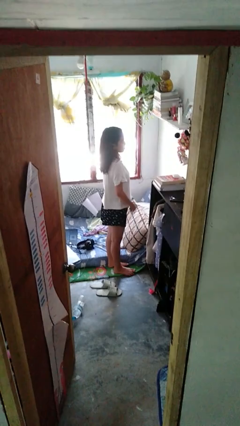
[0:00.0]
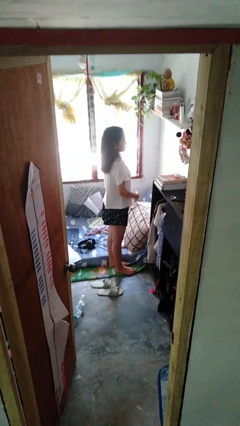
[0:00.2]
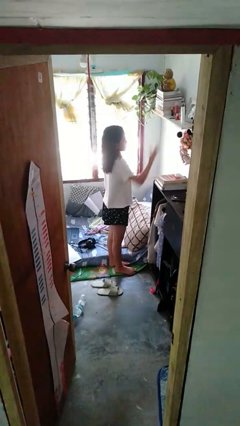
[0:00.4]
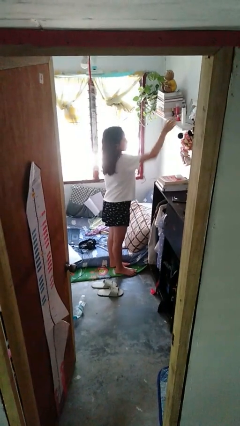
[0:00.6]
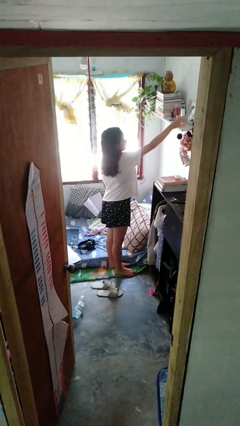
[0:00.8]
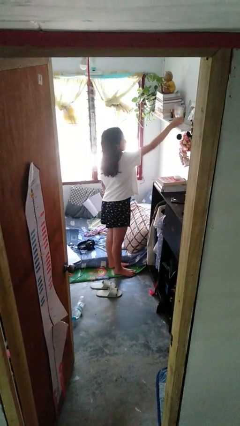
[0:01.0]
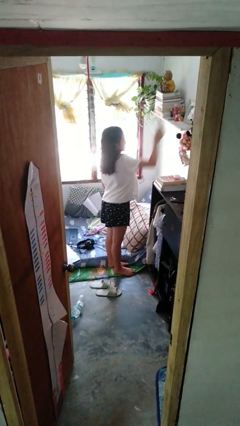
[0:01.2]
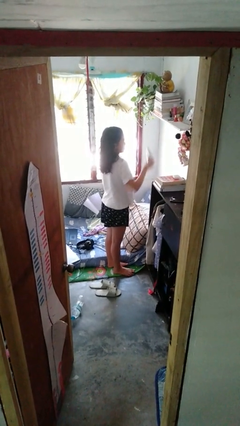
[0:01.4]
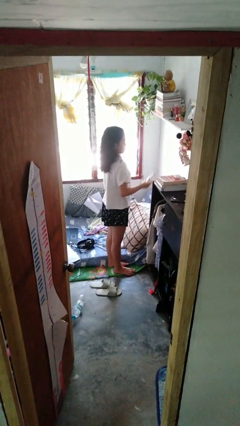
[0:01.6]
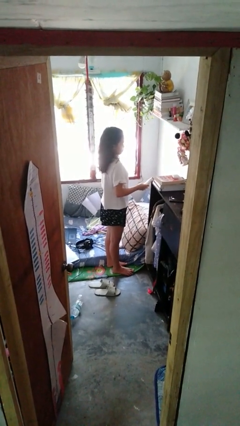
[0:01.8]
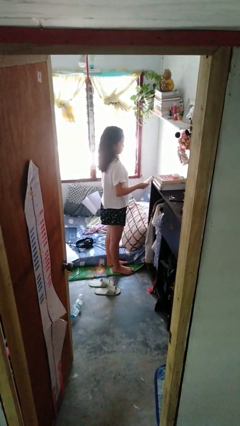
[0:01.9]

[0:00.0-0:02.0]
person picks up object from shelf

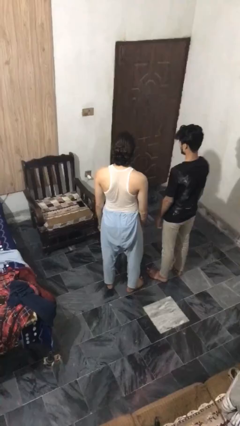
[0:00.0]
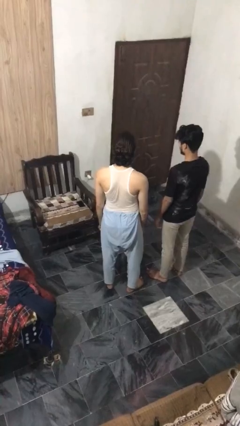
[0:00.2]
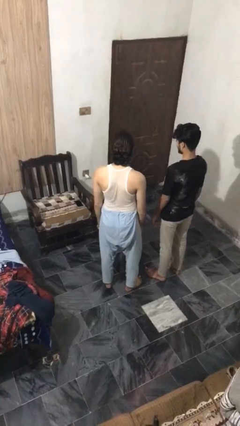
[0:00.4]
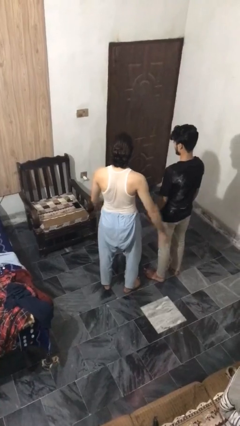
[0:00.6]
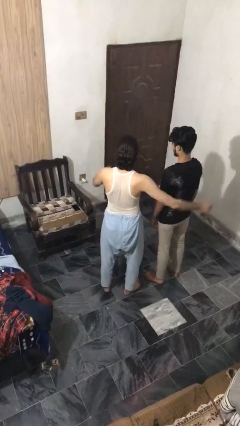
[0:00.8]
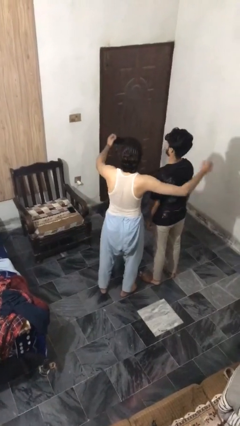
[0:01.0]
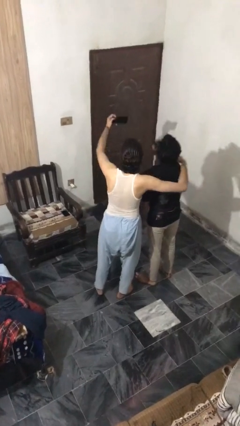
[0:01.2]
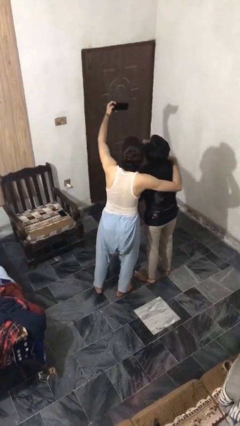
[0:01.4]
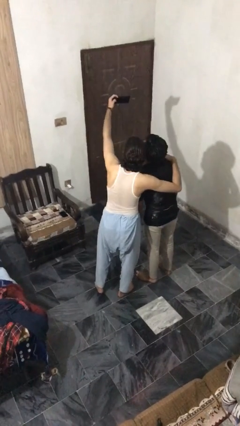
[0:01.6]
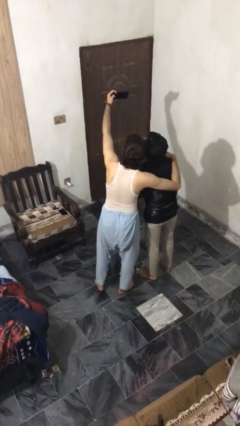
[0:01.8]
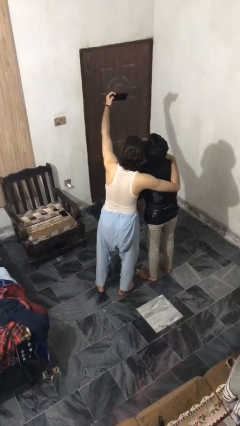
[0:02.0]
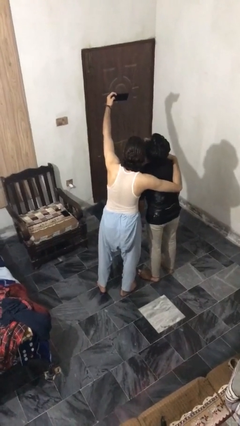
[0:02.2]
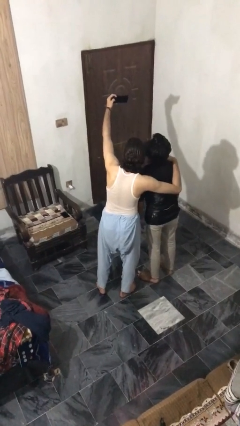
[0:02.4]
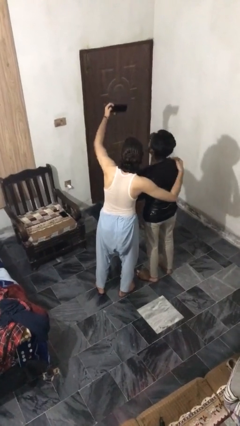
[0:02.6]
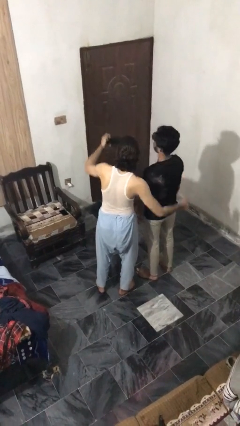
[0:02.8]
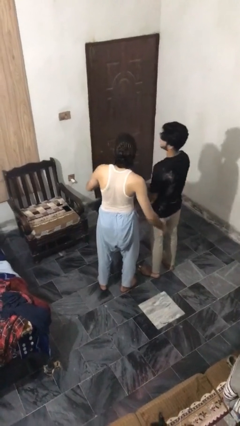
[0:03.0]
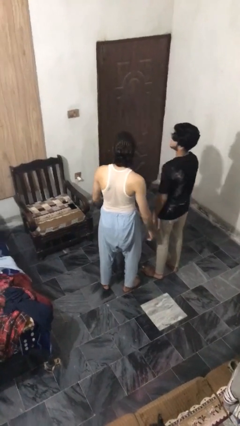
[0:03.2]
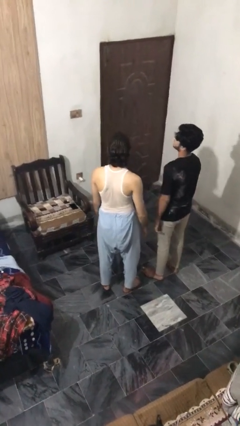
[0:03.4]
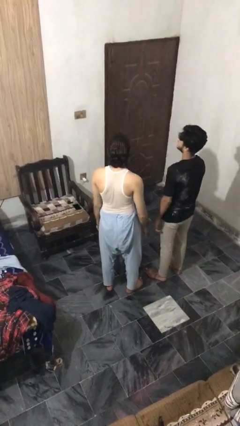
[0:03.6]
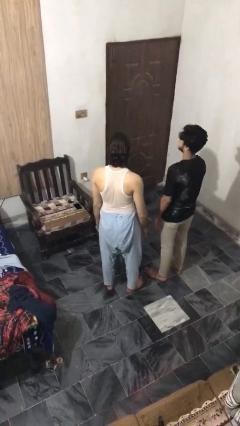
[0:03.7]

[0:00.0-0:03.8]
person takes selfie with person

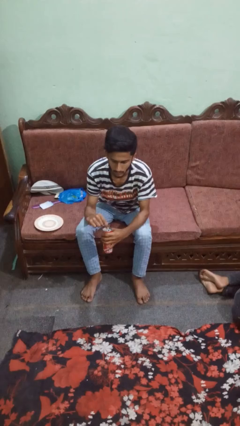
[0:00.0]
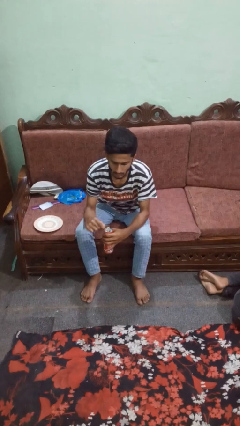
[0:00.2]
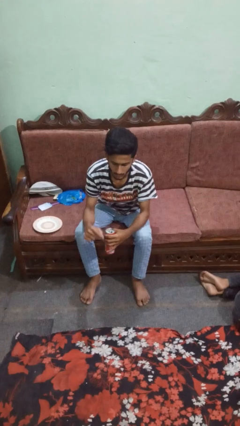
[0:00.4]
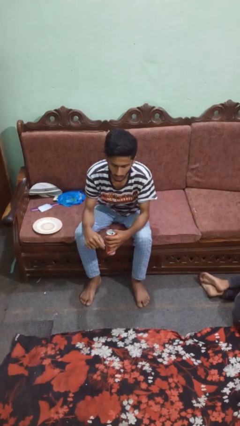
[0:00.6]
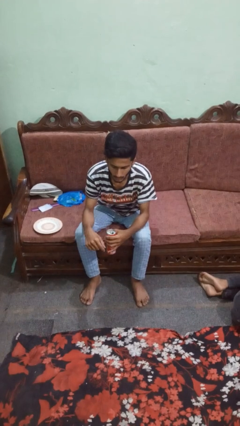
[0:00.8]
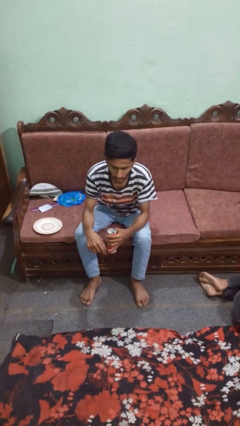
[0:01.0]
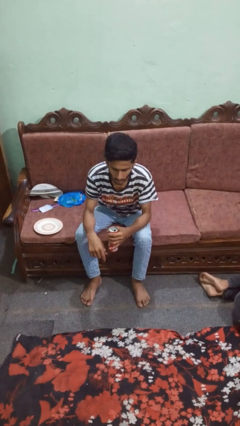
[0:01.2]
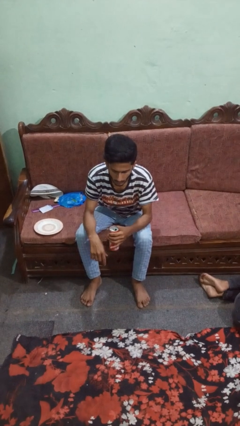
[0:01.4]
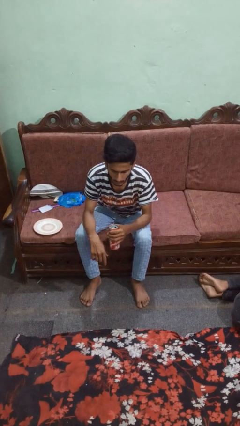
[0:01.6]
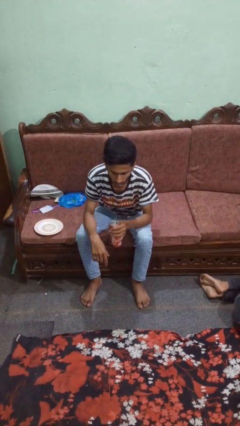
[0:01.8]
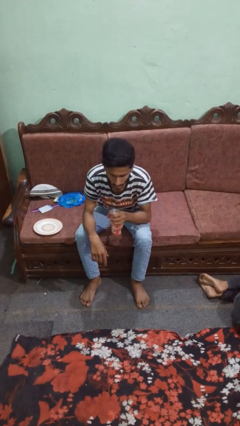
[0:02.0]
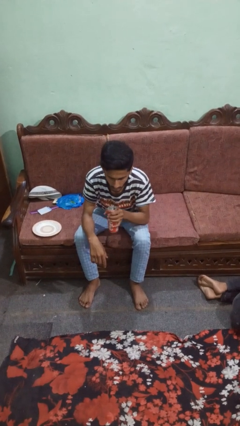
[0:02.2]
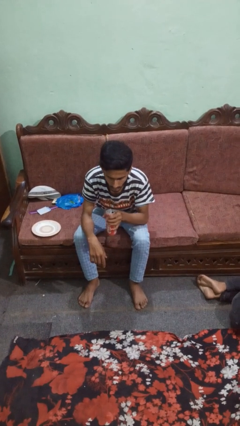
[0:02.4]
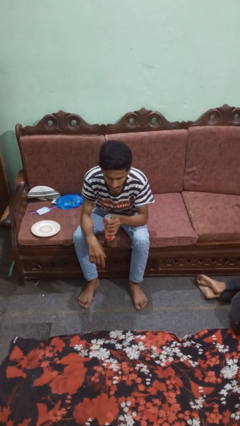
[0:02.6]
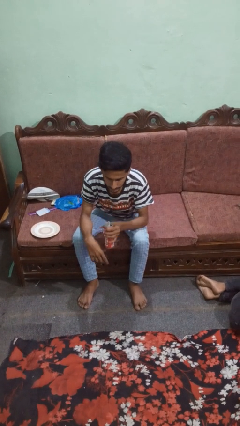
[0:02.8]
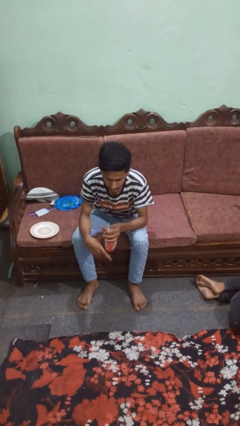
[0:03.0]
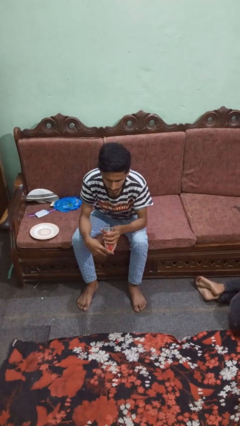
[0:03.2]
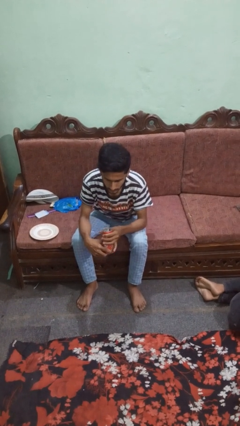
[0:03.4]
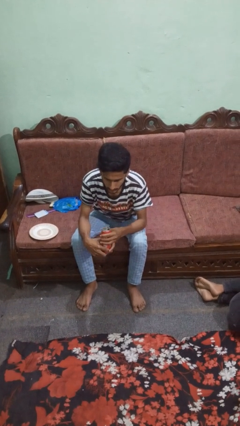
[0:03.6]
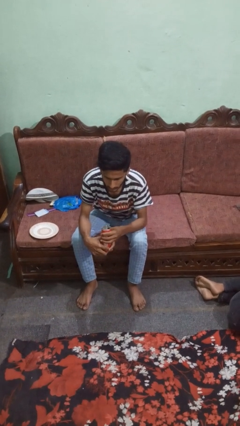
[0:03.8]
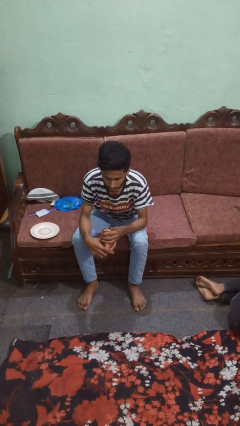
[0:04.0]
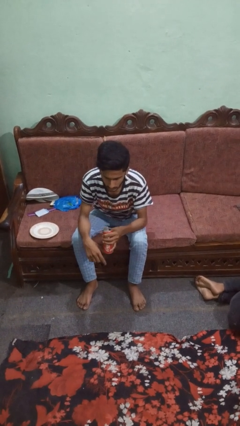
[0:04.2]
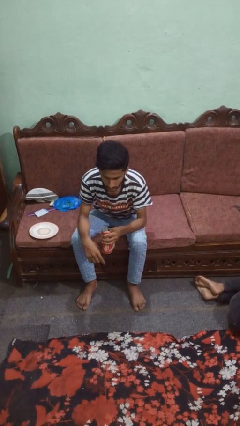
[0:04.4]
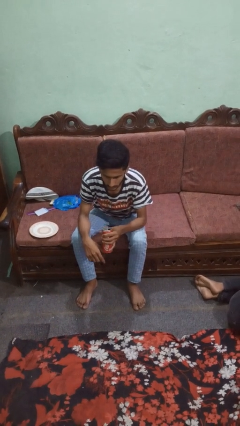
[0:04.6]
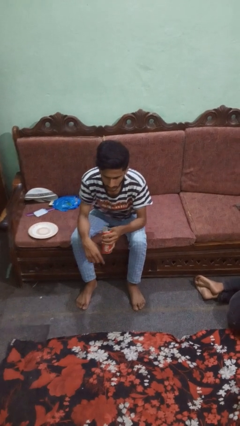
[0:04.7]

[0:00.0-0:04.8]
person opens beverage can

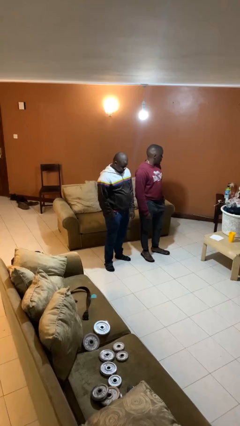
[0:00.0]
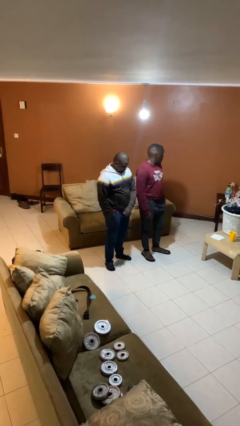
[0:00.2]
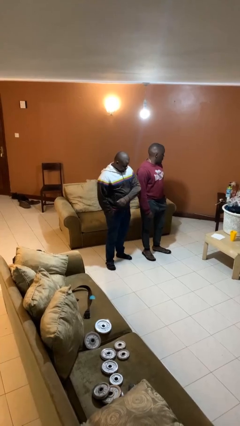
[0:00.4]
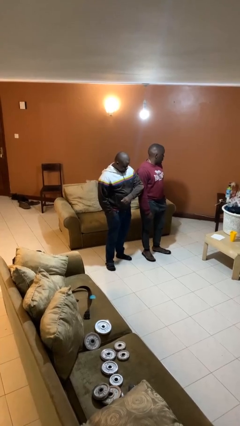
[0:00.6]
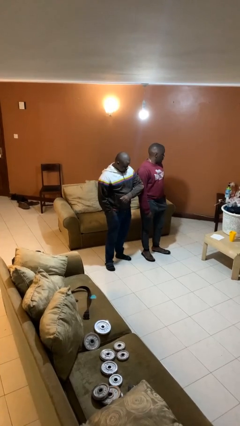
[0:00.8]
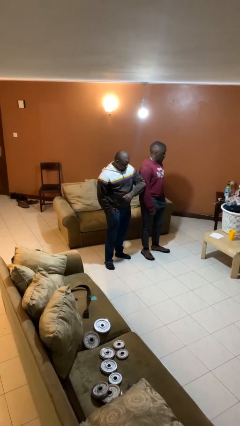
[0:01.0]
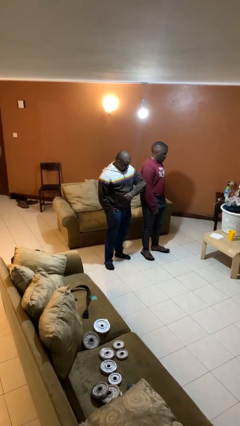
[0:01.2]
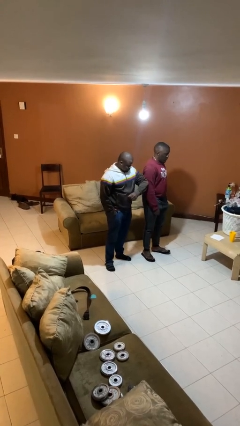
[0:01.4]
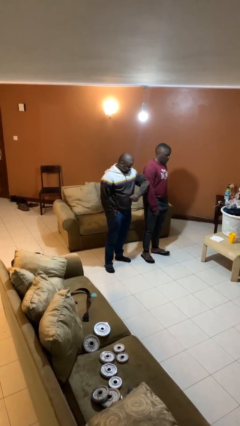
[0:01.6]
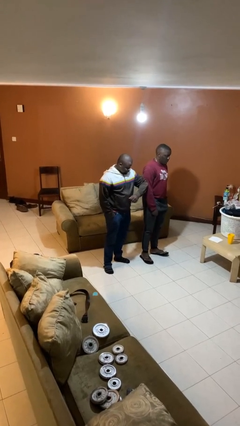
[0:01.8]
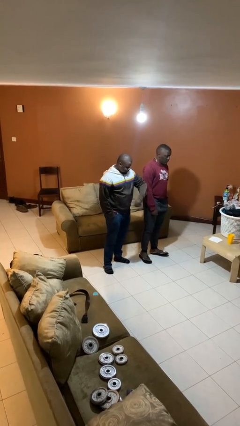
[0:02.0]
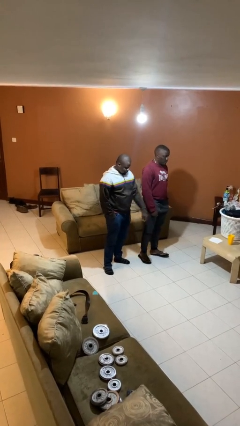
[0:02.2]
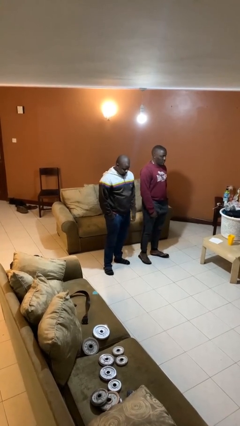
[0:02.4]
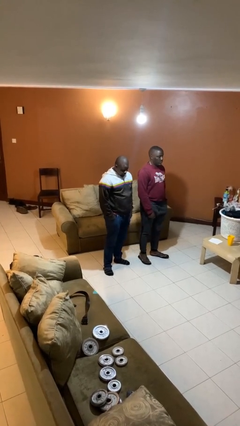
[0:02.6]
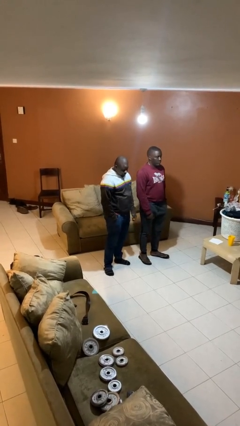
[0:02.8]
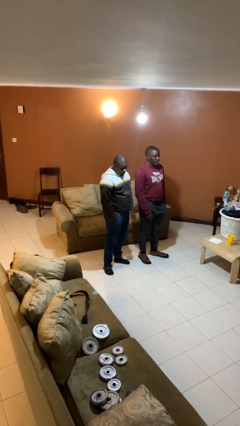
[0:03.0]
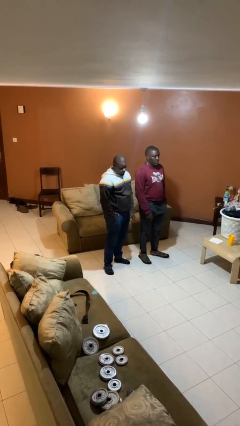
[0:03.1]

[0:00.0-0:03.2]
person nudges person with elbow

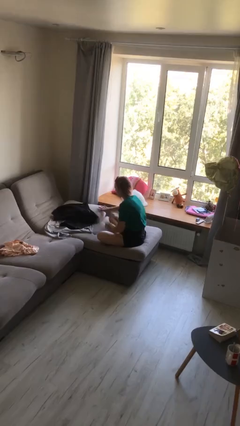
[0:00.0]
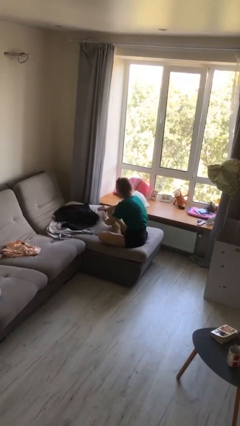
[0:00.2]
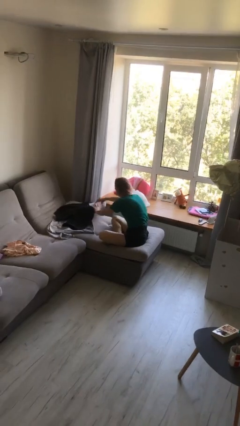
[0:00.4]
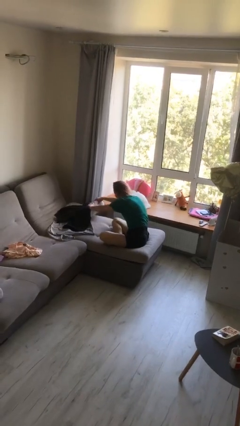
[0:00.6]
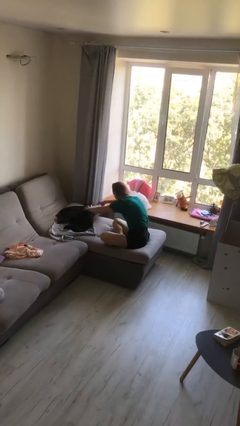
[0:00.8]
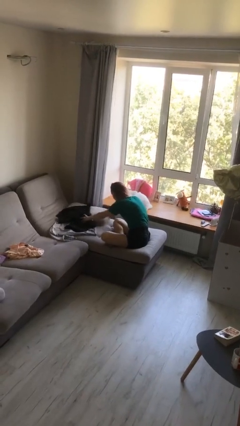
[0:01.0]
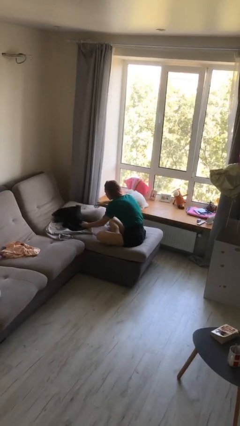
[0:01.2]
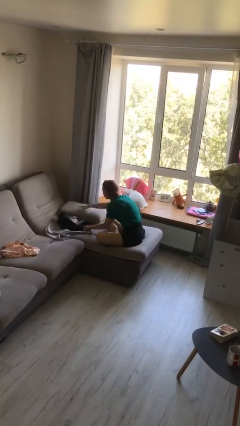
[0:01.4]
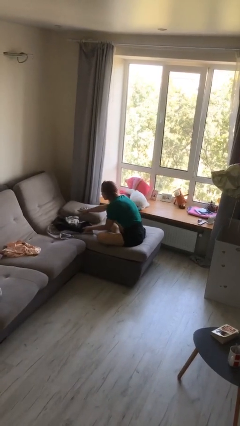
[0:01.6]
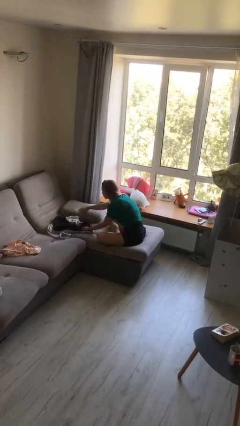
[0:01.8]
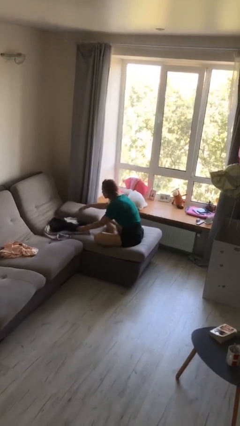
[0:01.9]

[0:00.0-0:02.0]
person searches in couch

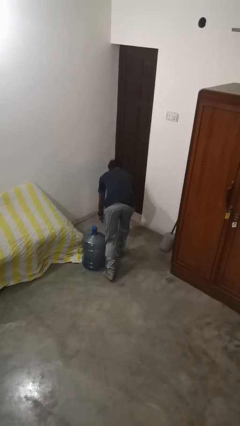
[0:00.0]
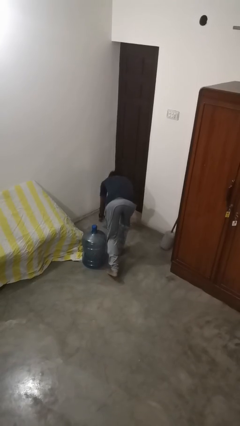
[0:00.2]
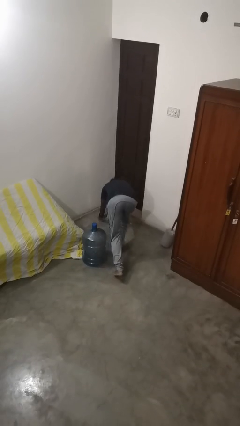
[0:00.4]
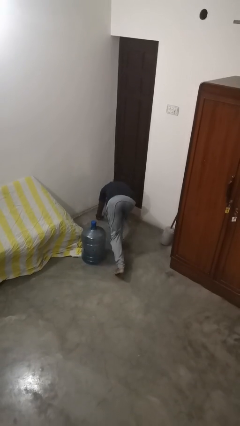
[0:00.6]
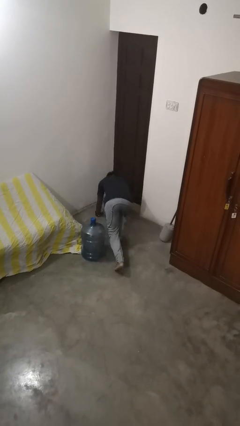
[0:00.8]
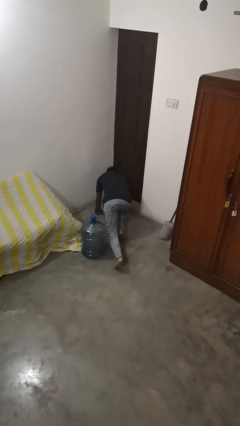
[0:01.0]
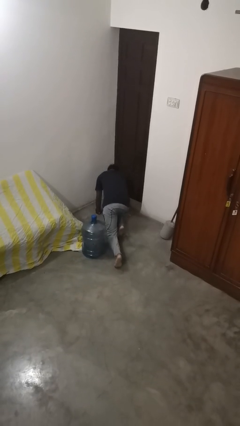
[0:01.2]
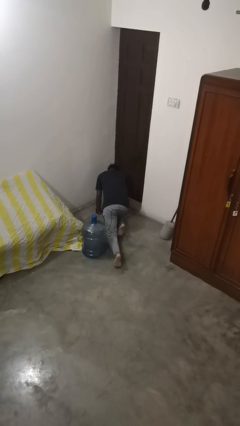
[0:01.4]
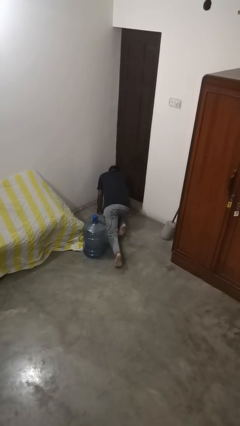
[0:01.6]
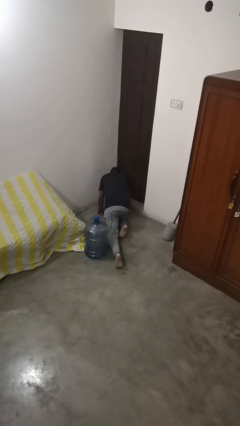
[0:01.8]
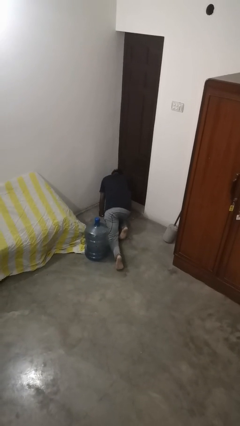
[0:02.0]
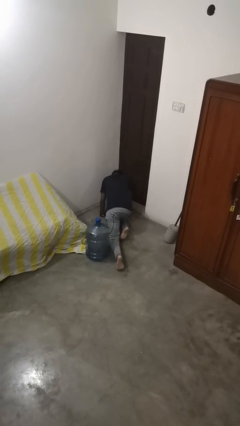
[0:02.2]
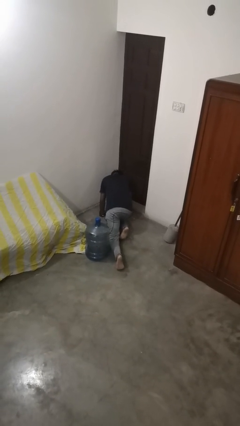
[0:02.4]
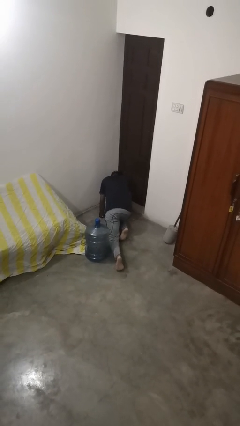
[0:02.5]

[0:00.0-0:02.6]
person lies down on floor
